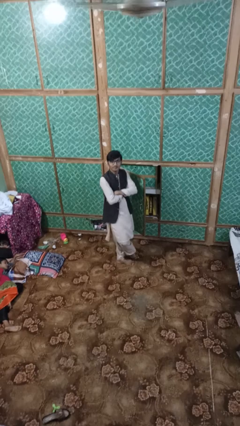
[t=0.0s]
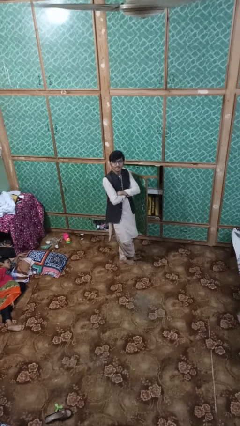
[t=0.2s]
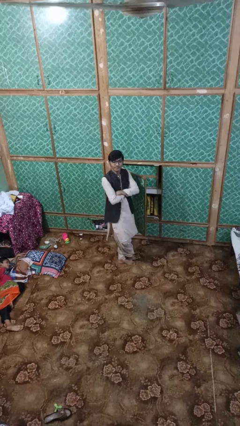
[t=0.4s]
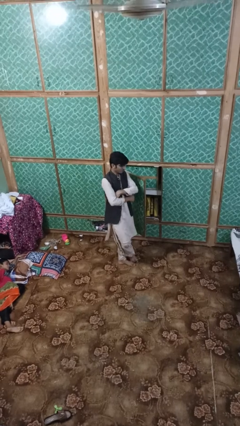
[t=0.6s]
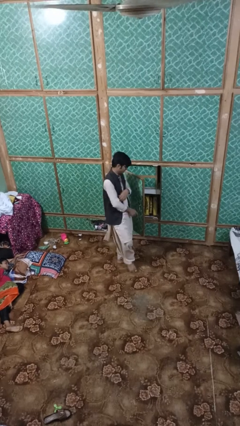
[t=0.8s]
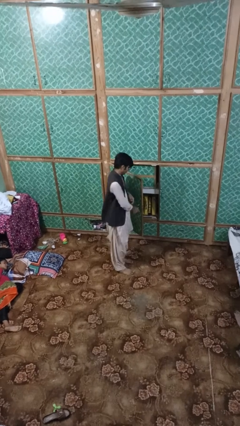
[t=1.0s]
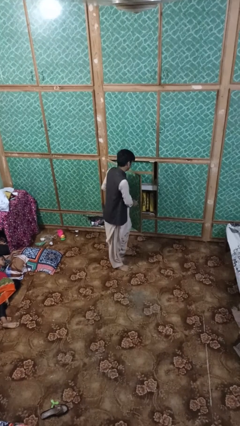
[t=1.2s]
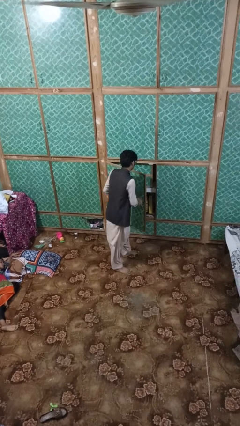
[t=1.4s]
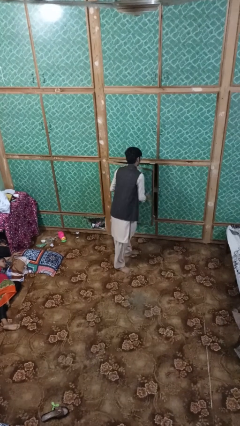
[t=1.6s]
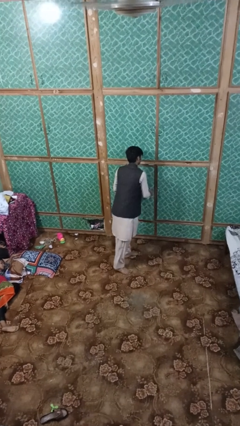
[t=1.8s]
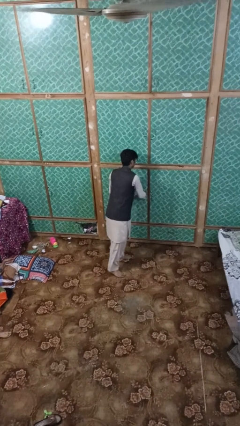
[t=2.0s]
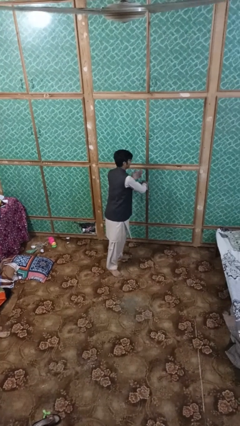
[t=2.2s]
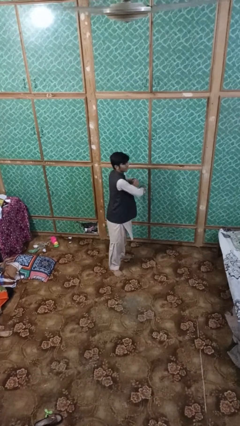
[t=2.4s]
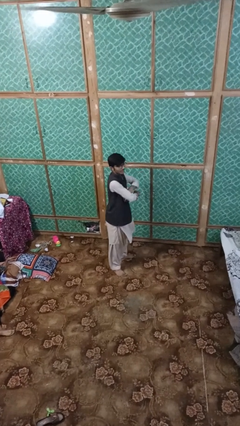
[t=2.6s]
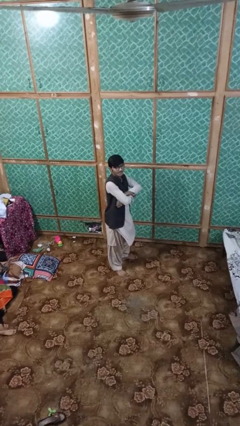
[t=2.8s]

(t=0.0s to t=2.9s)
person closes dresser drawer

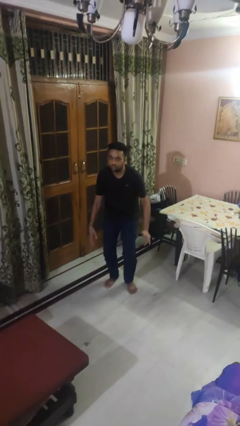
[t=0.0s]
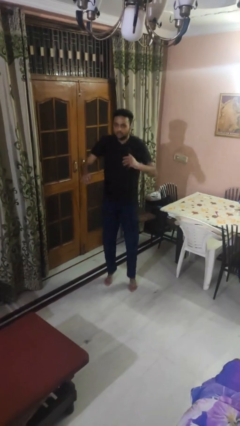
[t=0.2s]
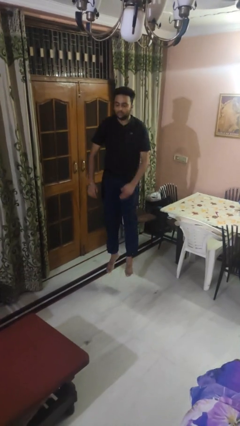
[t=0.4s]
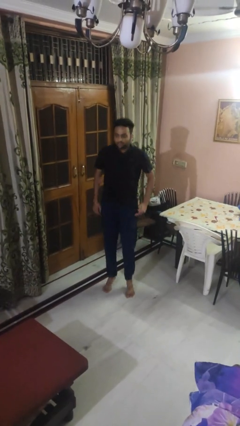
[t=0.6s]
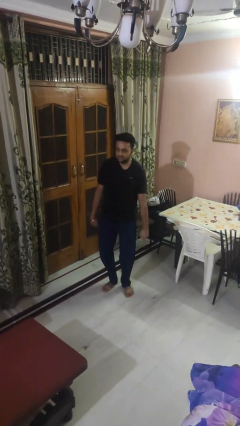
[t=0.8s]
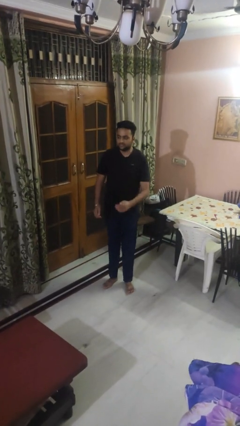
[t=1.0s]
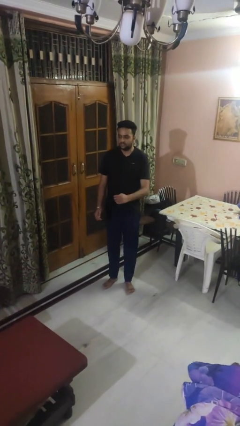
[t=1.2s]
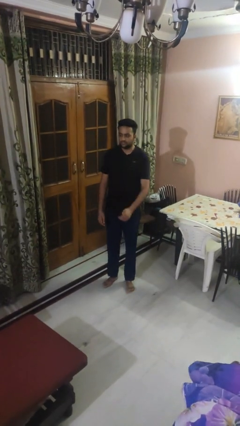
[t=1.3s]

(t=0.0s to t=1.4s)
person jumps

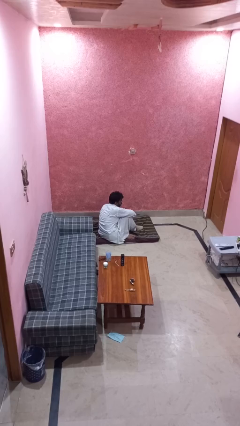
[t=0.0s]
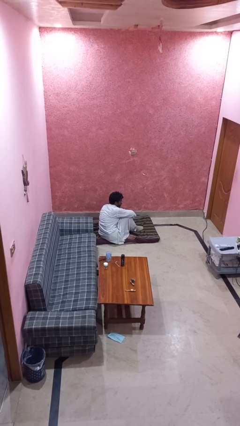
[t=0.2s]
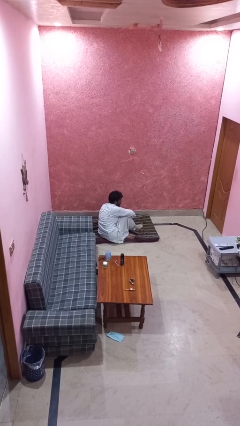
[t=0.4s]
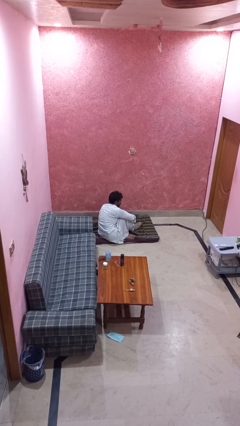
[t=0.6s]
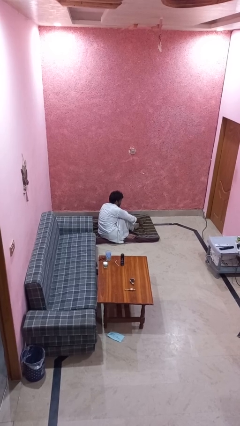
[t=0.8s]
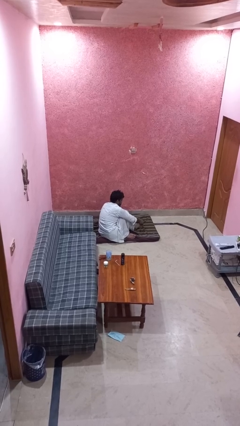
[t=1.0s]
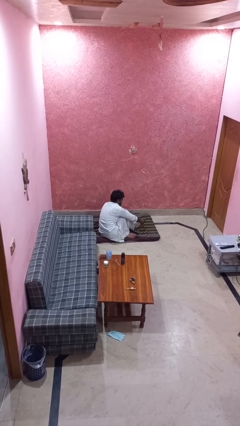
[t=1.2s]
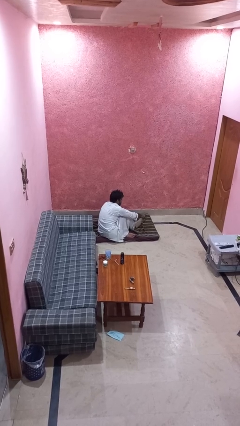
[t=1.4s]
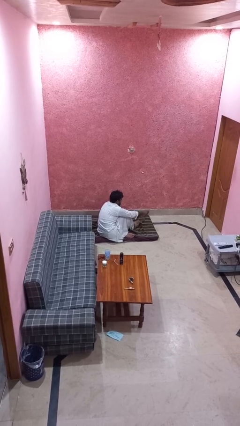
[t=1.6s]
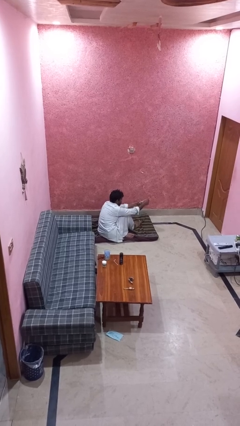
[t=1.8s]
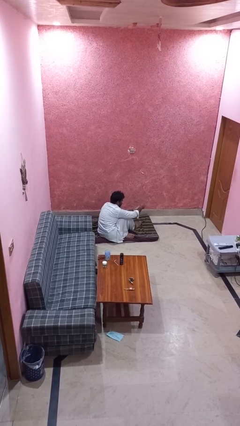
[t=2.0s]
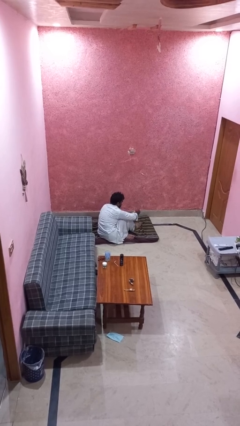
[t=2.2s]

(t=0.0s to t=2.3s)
person takes off socks

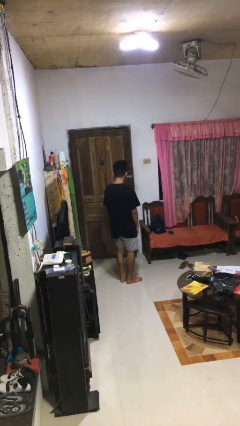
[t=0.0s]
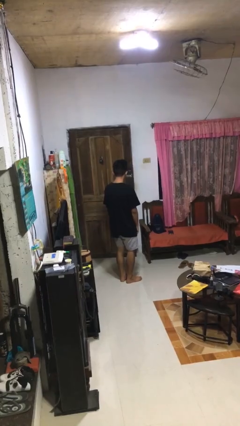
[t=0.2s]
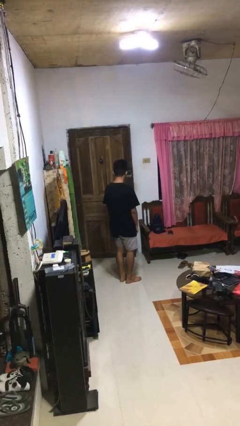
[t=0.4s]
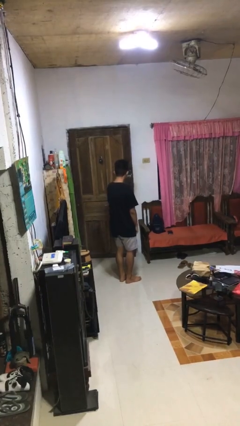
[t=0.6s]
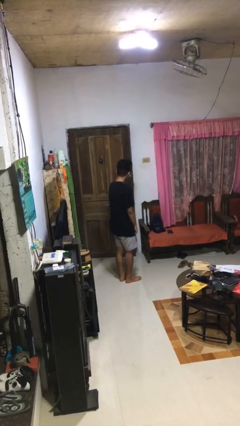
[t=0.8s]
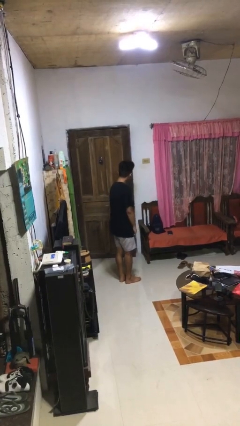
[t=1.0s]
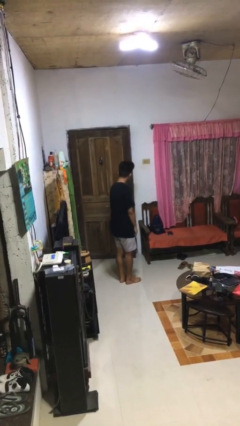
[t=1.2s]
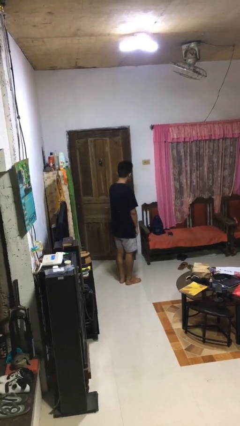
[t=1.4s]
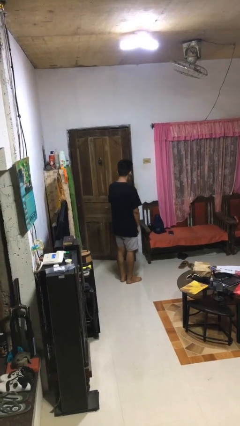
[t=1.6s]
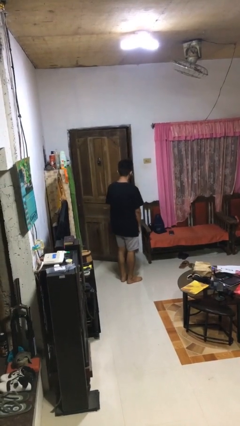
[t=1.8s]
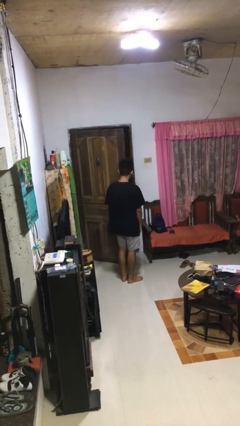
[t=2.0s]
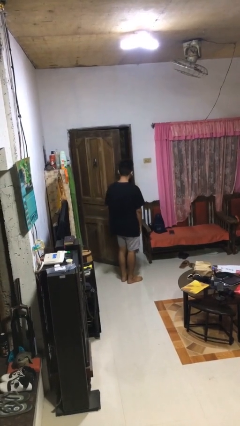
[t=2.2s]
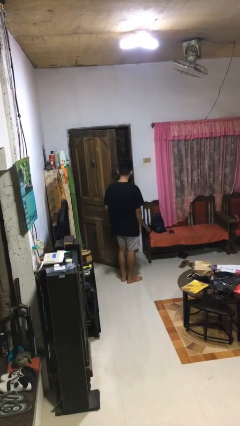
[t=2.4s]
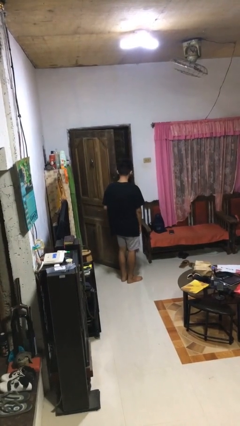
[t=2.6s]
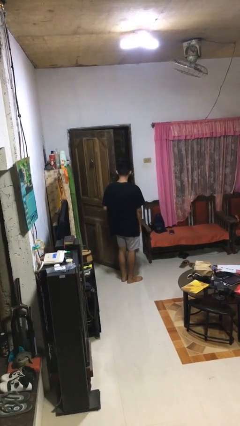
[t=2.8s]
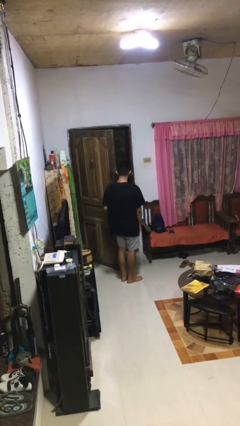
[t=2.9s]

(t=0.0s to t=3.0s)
person opens facility door

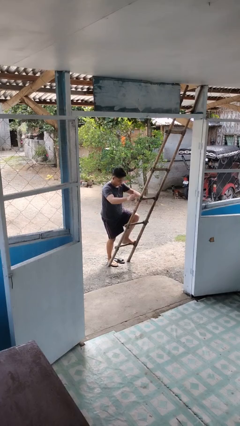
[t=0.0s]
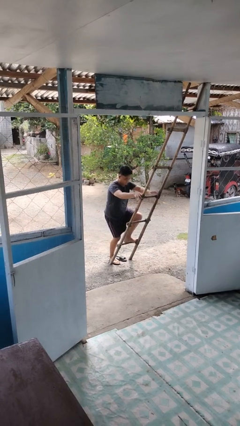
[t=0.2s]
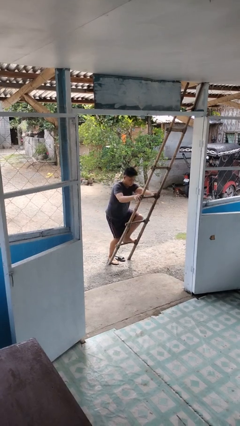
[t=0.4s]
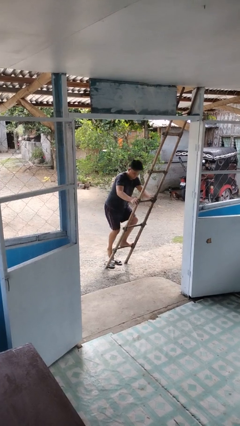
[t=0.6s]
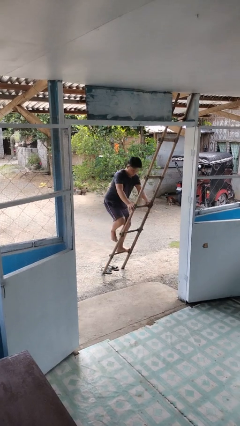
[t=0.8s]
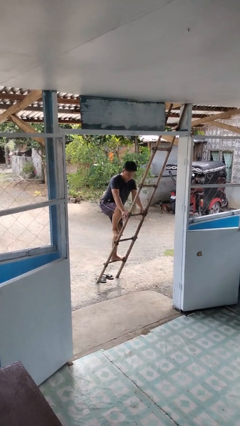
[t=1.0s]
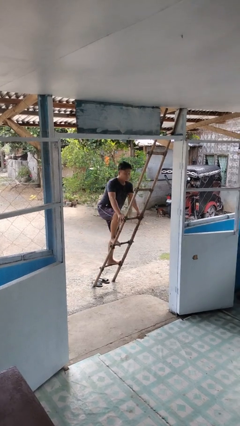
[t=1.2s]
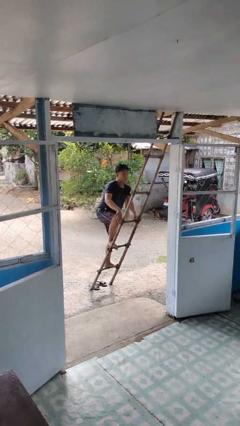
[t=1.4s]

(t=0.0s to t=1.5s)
person climbs up ladder

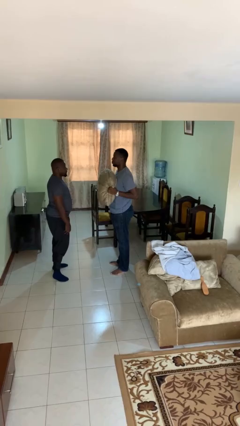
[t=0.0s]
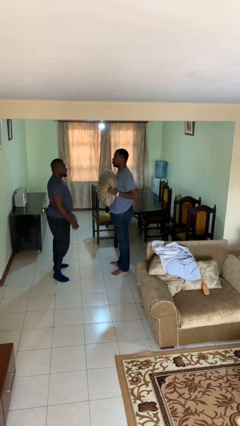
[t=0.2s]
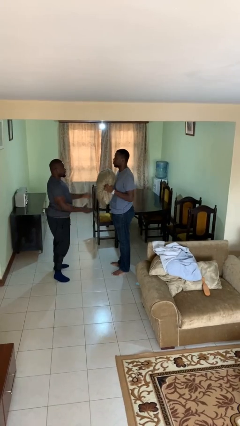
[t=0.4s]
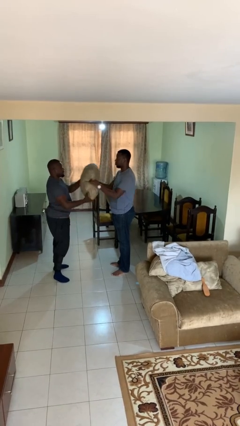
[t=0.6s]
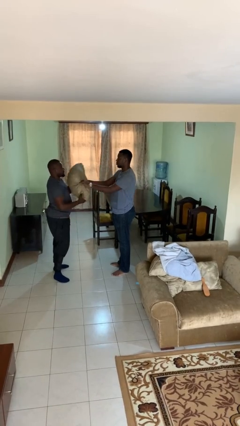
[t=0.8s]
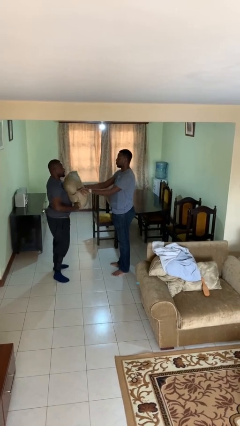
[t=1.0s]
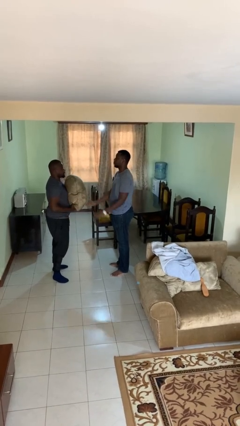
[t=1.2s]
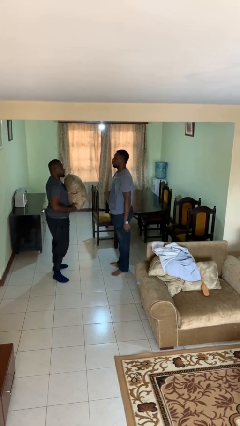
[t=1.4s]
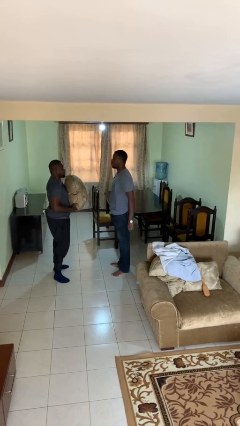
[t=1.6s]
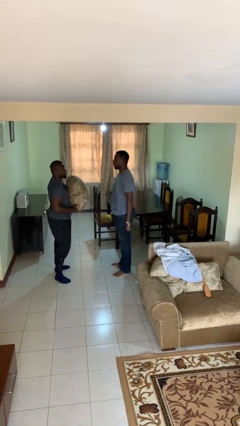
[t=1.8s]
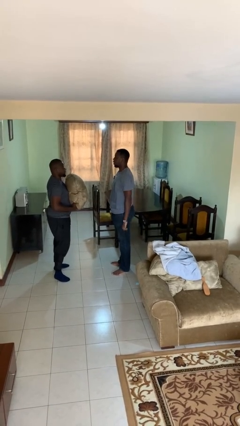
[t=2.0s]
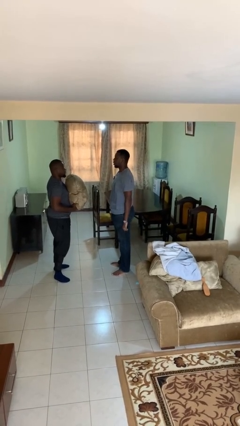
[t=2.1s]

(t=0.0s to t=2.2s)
person transfers object to person

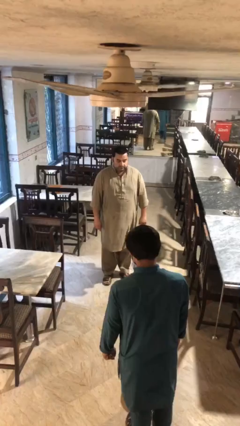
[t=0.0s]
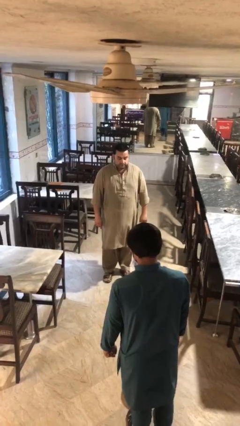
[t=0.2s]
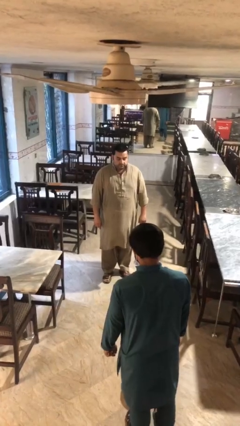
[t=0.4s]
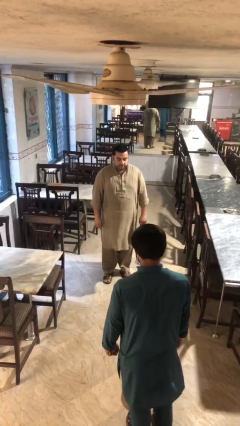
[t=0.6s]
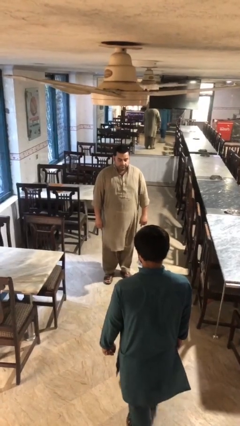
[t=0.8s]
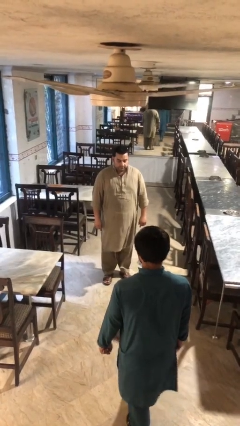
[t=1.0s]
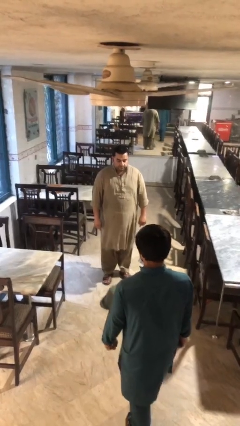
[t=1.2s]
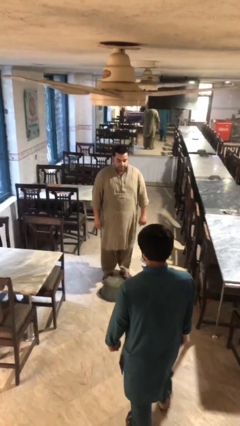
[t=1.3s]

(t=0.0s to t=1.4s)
person kicks object to person

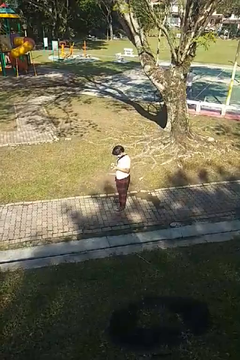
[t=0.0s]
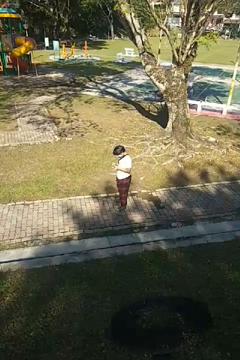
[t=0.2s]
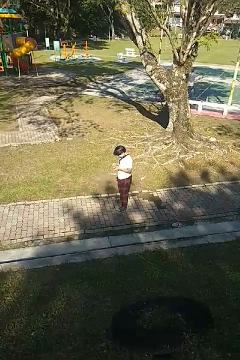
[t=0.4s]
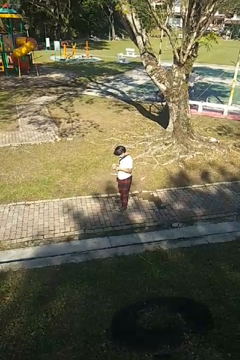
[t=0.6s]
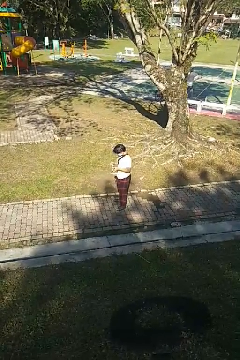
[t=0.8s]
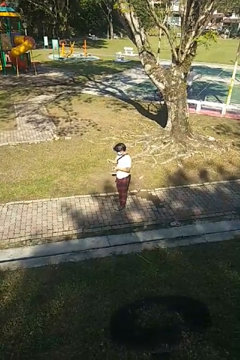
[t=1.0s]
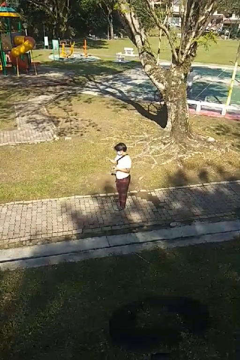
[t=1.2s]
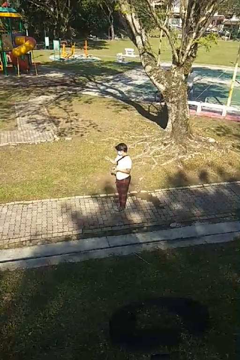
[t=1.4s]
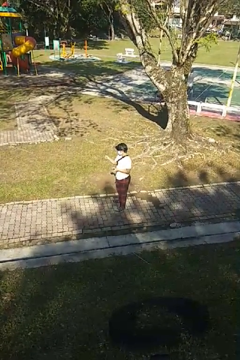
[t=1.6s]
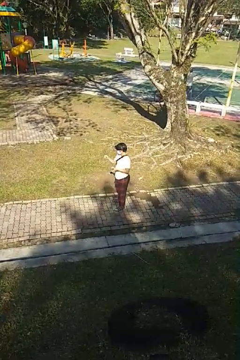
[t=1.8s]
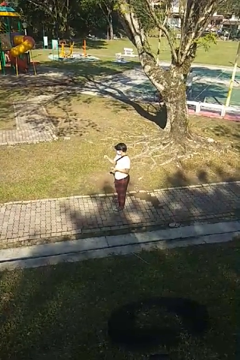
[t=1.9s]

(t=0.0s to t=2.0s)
person takes object from purse

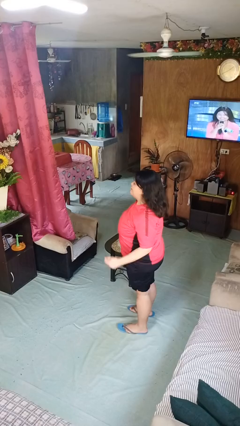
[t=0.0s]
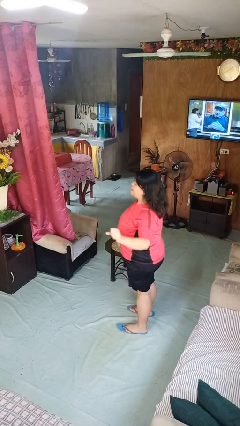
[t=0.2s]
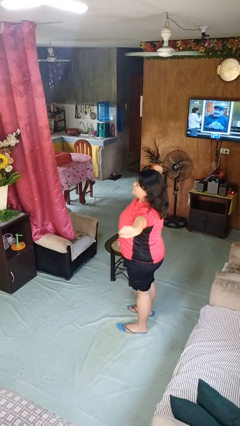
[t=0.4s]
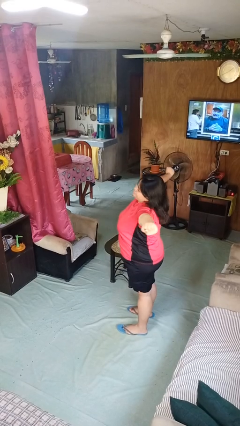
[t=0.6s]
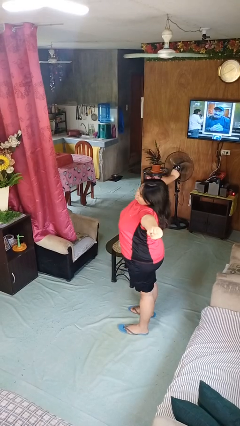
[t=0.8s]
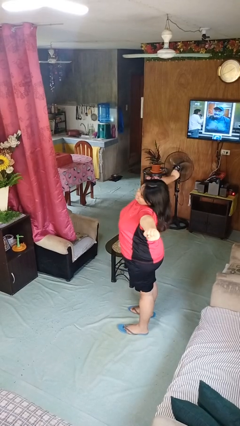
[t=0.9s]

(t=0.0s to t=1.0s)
person stretches arms to side
